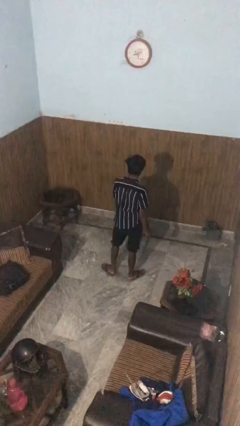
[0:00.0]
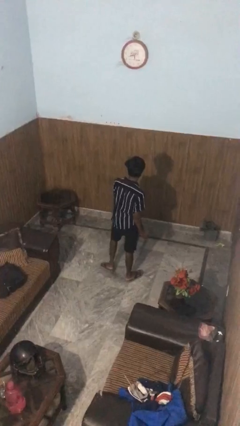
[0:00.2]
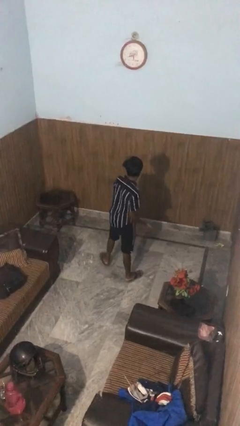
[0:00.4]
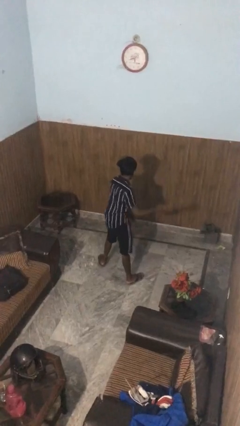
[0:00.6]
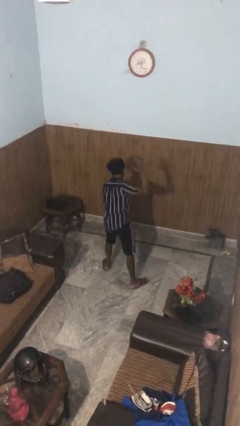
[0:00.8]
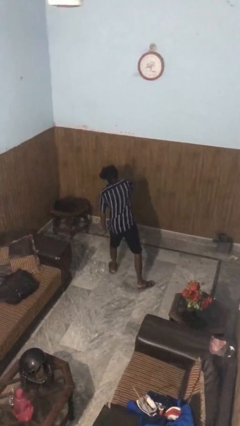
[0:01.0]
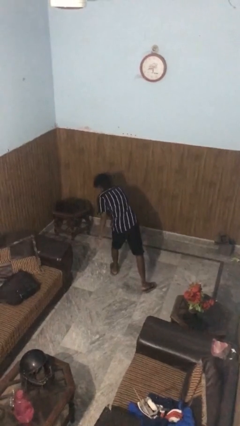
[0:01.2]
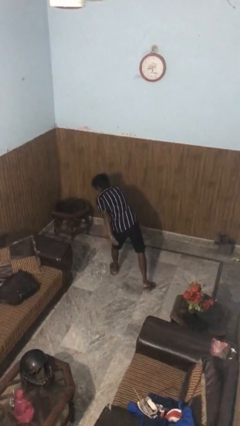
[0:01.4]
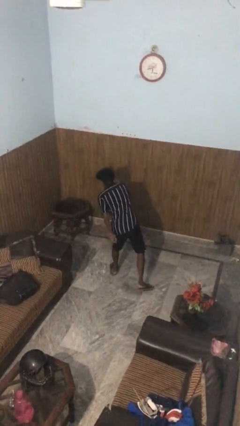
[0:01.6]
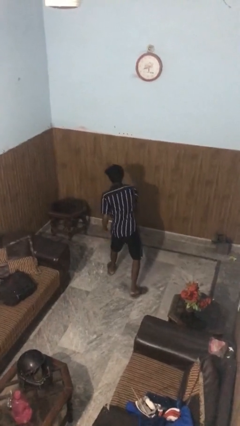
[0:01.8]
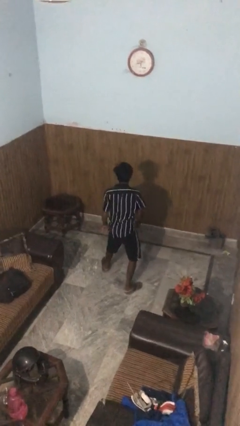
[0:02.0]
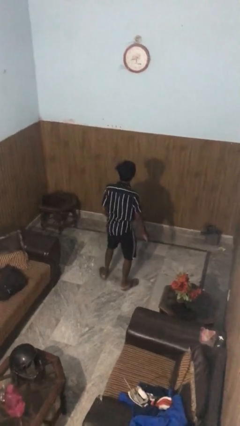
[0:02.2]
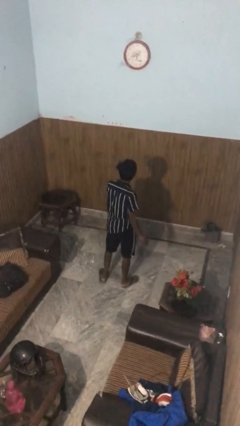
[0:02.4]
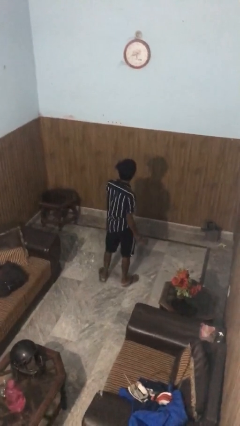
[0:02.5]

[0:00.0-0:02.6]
person karate chop

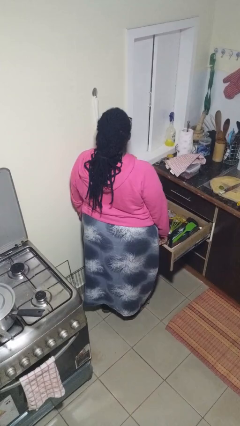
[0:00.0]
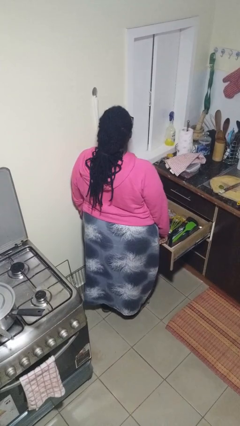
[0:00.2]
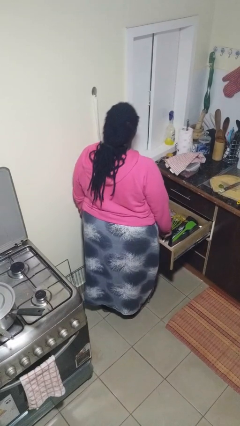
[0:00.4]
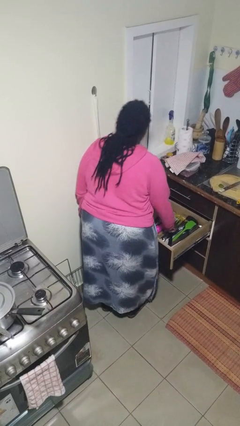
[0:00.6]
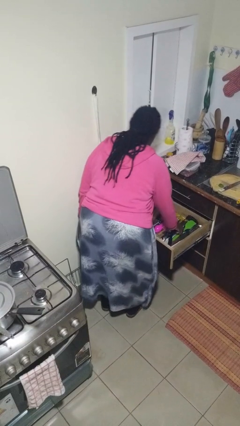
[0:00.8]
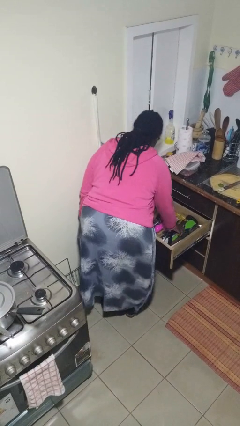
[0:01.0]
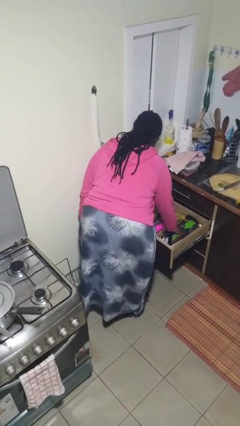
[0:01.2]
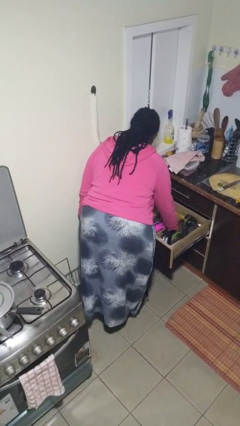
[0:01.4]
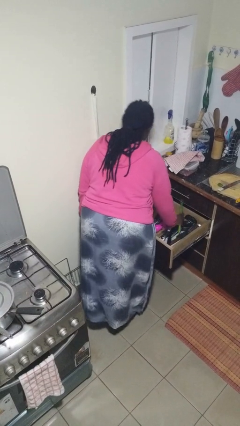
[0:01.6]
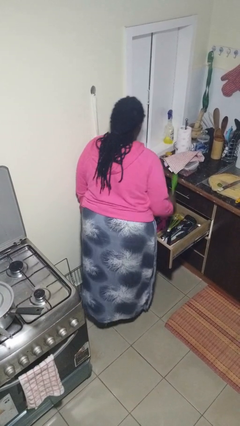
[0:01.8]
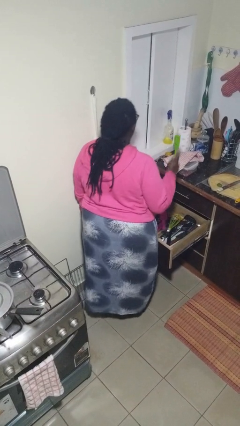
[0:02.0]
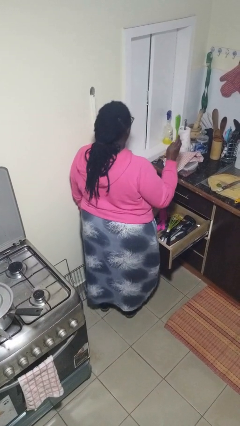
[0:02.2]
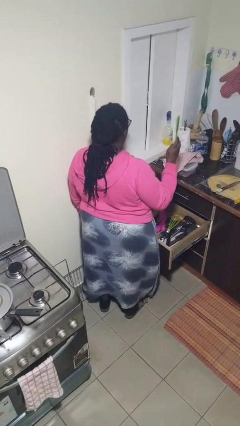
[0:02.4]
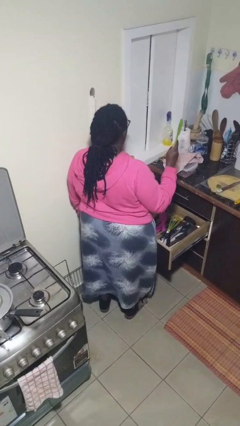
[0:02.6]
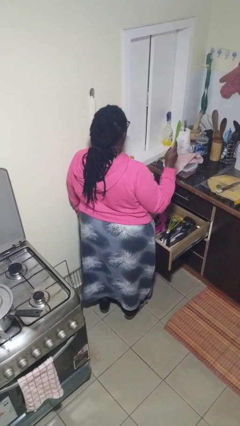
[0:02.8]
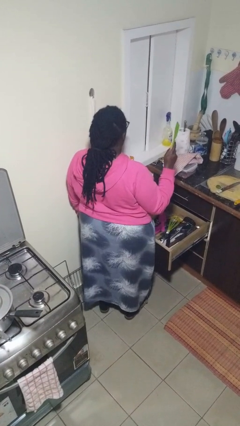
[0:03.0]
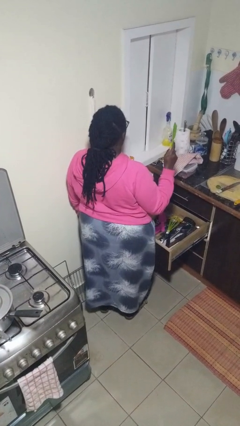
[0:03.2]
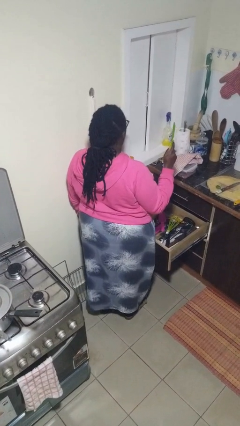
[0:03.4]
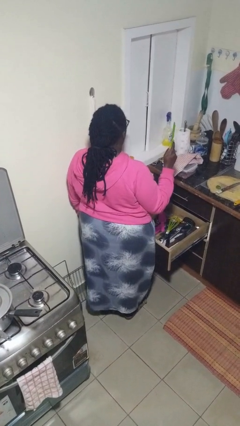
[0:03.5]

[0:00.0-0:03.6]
person takes object from kitchen drawer

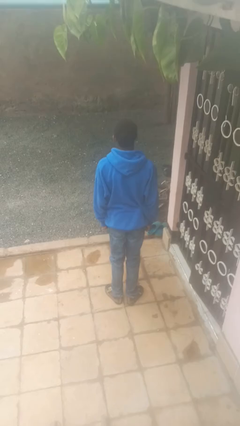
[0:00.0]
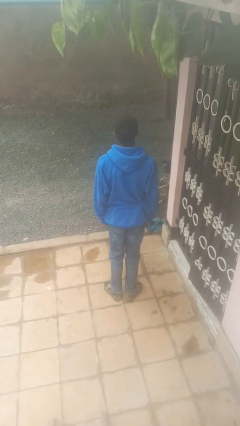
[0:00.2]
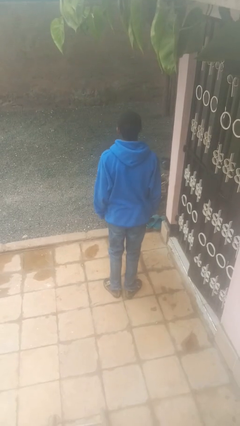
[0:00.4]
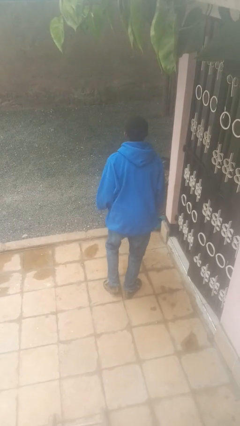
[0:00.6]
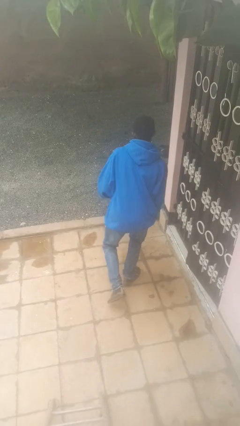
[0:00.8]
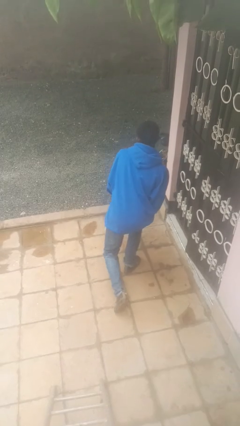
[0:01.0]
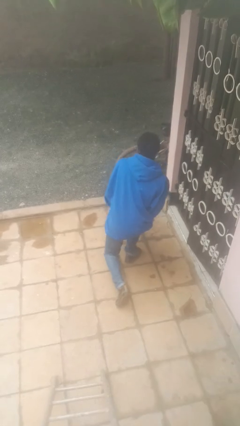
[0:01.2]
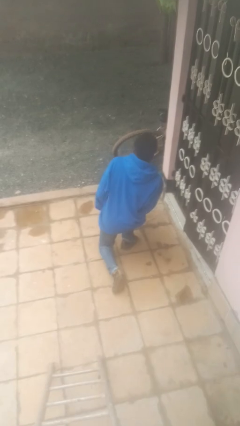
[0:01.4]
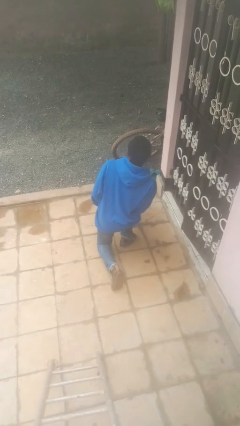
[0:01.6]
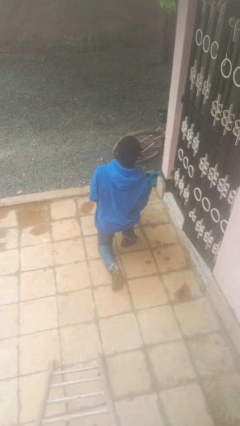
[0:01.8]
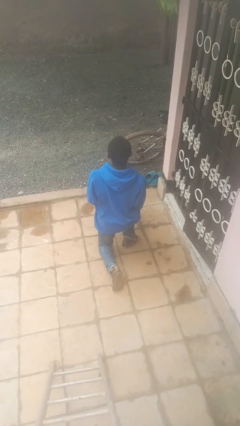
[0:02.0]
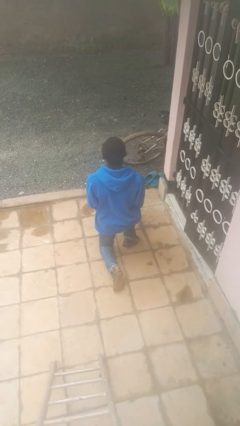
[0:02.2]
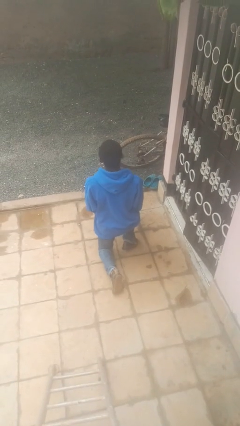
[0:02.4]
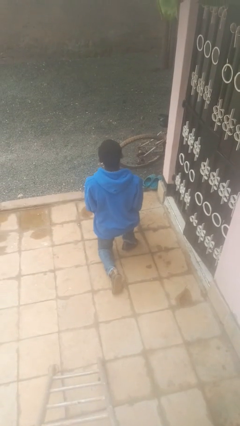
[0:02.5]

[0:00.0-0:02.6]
person kneels

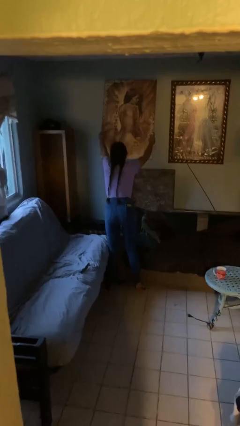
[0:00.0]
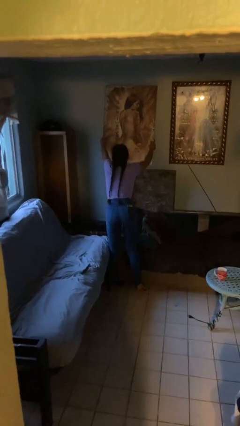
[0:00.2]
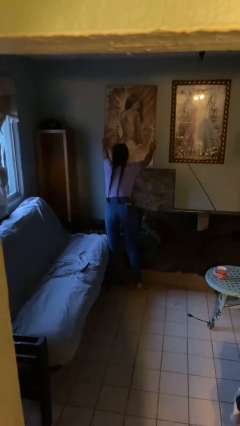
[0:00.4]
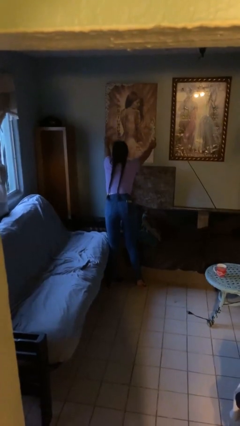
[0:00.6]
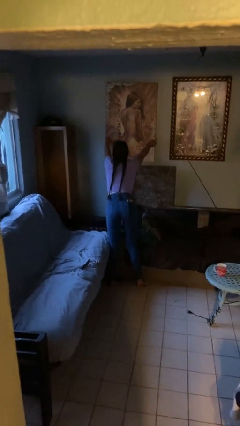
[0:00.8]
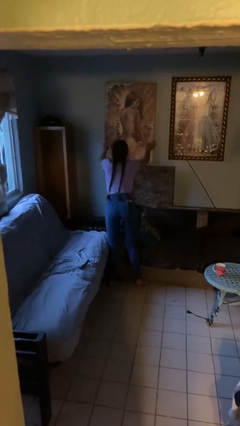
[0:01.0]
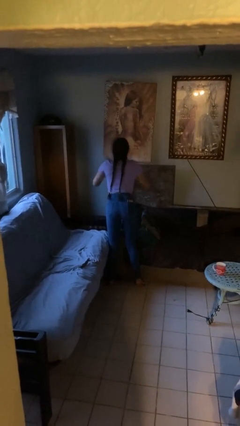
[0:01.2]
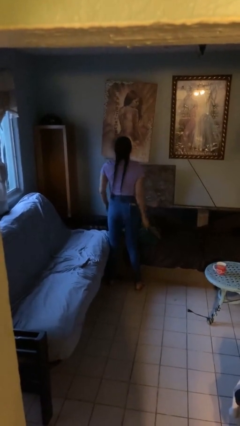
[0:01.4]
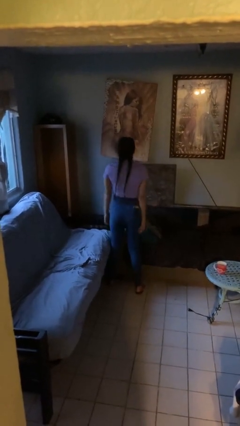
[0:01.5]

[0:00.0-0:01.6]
person puts up picture frame

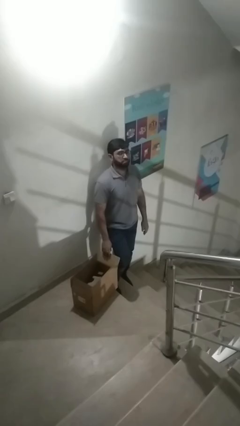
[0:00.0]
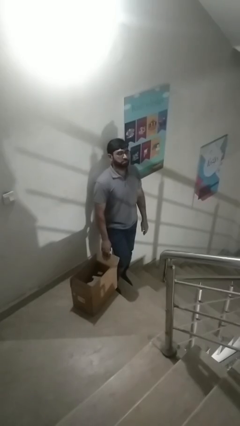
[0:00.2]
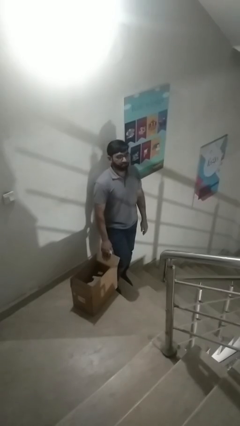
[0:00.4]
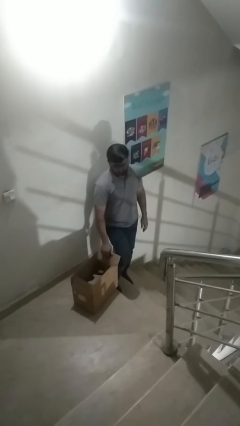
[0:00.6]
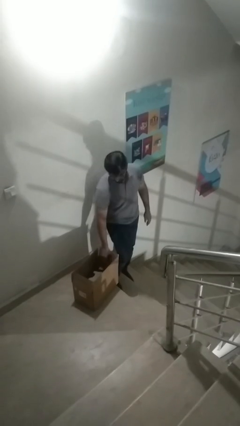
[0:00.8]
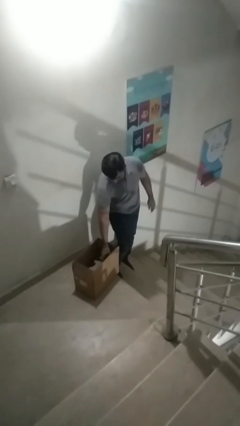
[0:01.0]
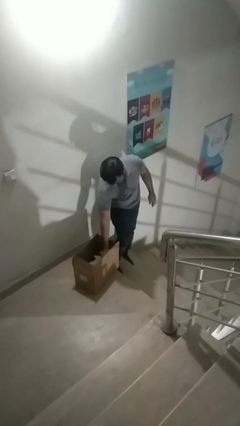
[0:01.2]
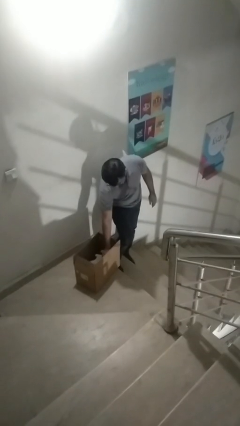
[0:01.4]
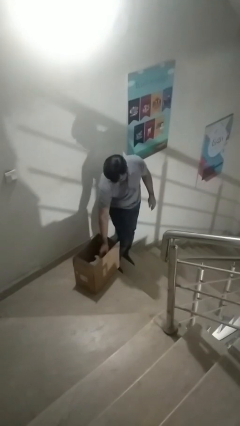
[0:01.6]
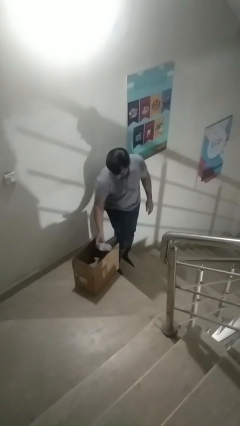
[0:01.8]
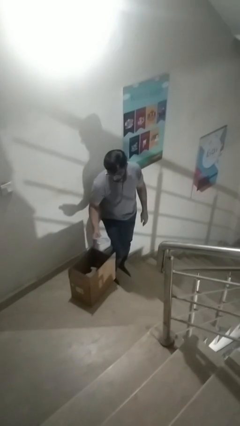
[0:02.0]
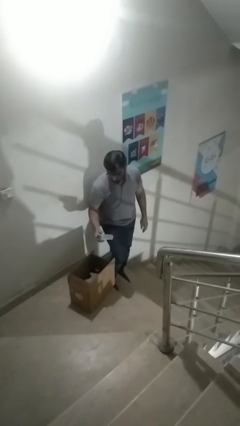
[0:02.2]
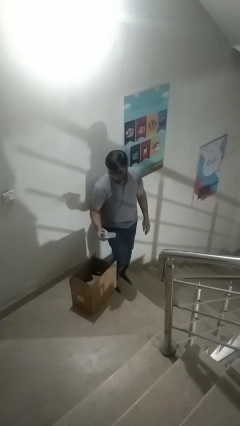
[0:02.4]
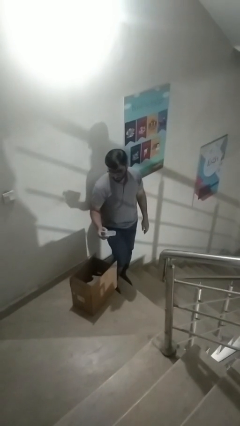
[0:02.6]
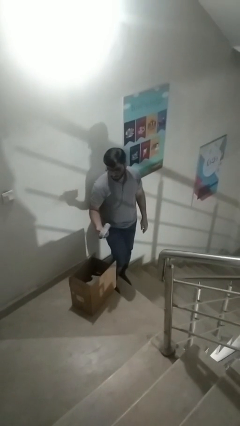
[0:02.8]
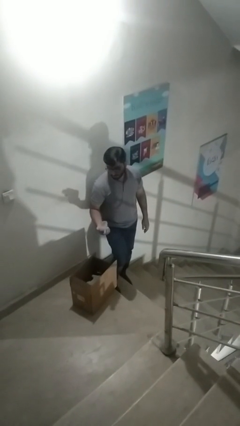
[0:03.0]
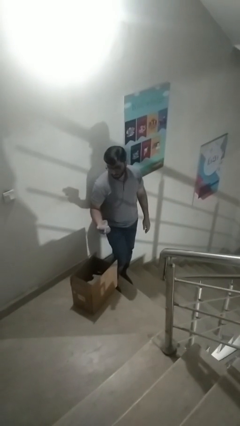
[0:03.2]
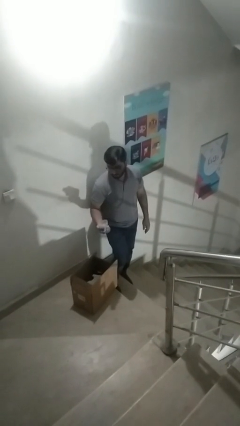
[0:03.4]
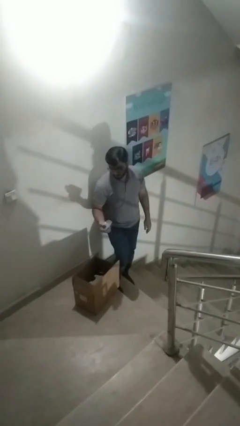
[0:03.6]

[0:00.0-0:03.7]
person takes object from box

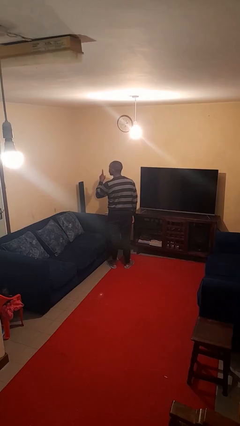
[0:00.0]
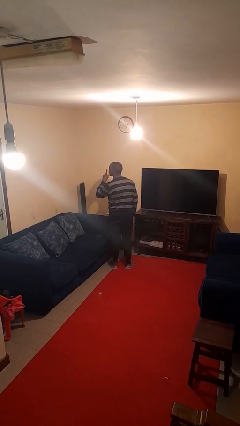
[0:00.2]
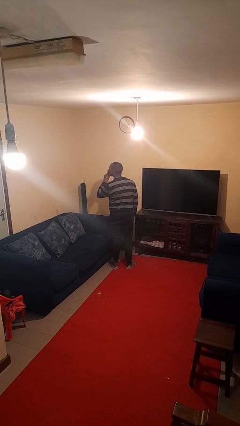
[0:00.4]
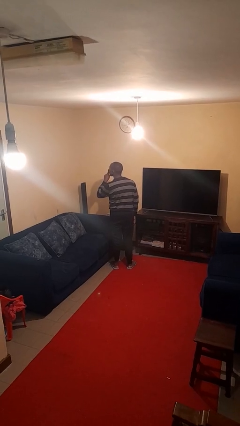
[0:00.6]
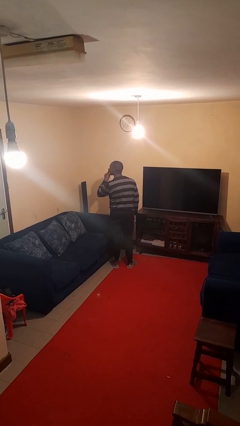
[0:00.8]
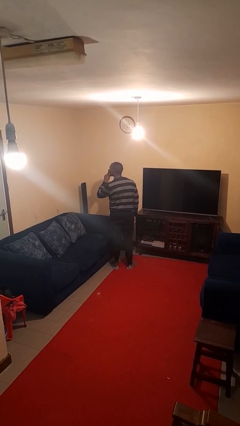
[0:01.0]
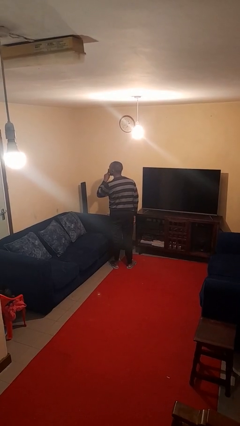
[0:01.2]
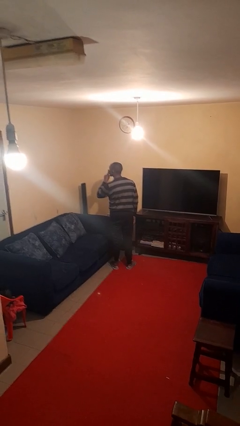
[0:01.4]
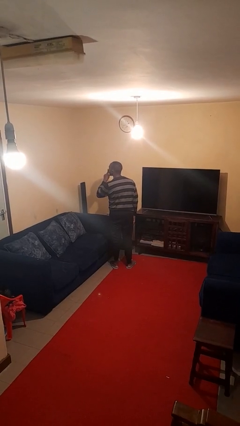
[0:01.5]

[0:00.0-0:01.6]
person gestures be quiet

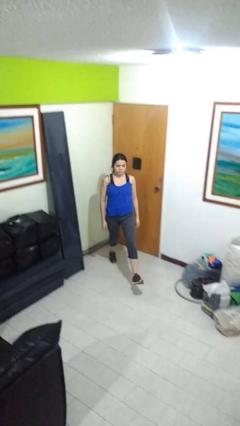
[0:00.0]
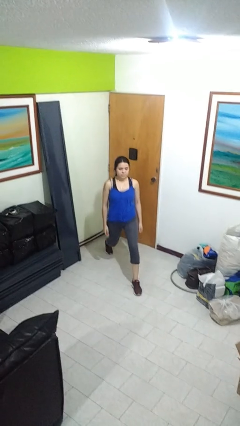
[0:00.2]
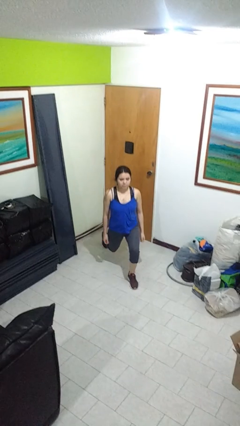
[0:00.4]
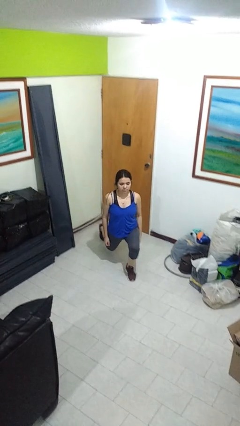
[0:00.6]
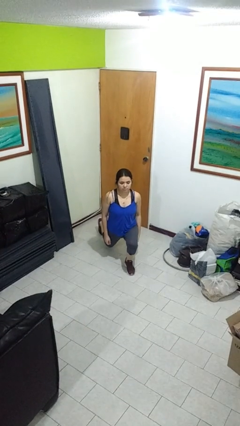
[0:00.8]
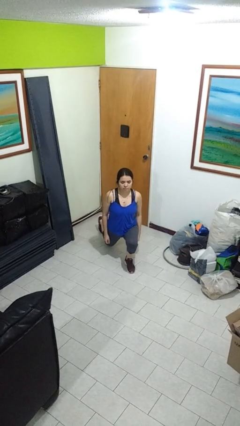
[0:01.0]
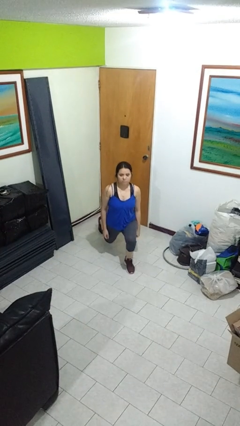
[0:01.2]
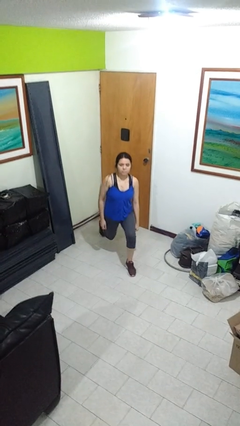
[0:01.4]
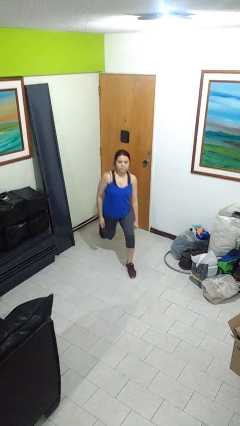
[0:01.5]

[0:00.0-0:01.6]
person exercises with lunges
